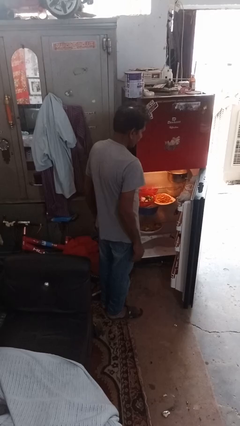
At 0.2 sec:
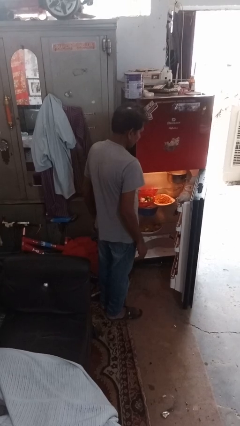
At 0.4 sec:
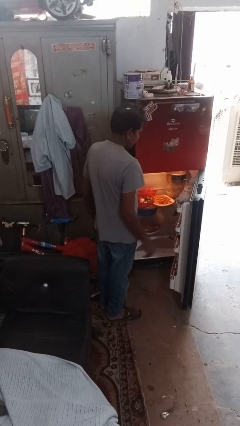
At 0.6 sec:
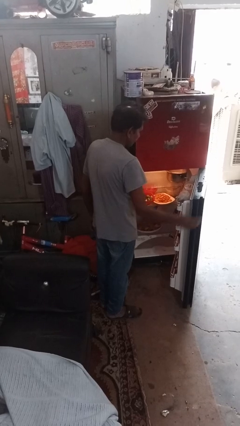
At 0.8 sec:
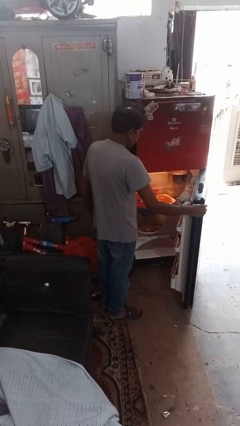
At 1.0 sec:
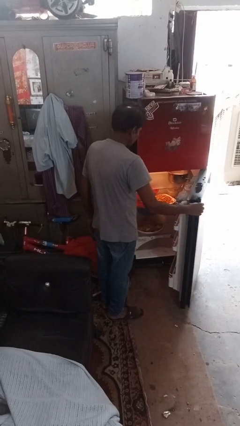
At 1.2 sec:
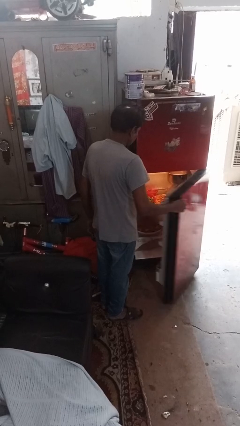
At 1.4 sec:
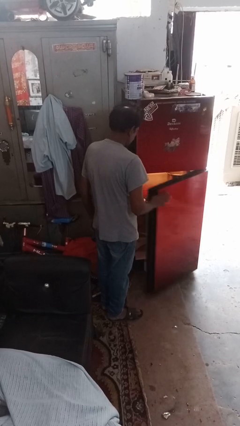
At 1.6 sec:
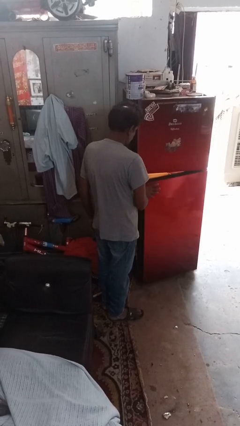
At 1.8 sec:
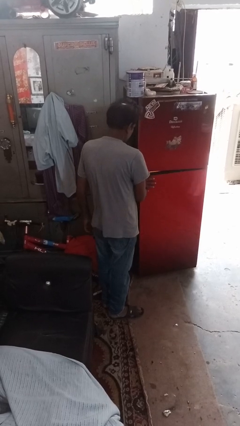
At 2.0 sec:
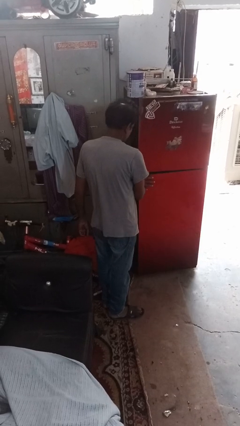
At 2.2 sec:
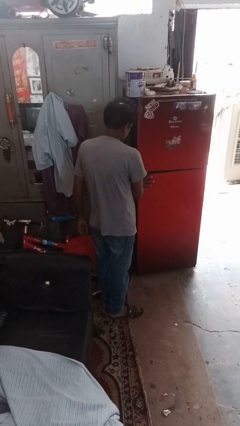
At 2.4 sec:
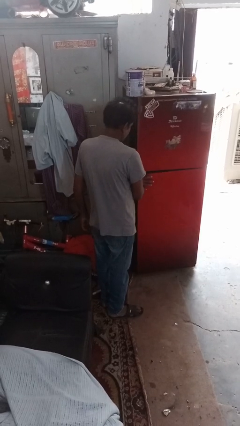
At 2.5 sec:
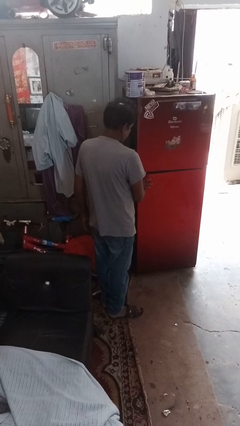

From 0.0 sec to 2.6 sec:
person closes refrigerator

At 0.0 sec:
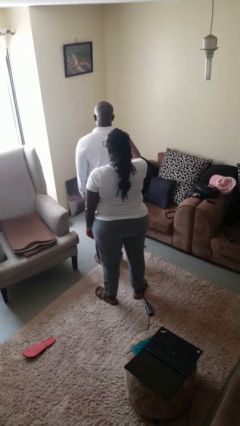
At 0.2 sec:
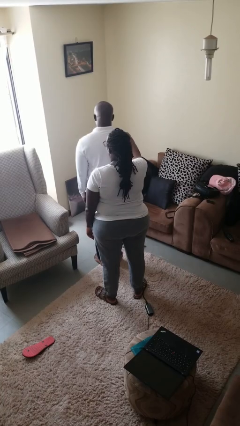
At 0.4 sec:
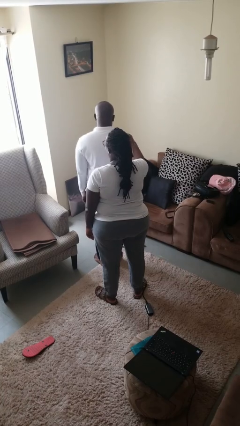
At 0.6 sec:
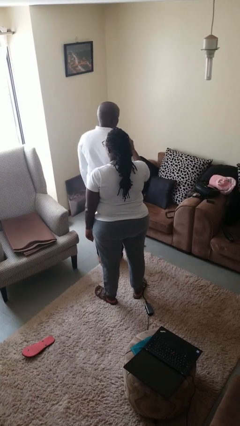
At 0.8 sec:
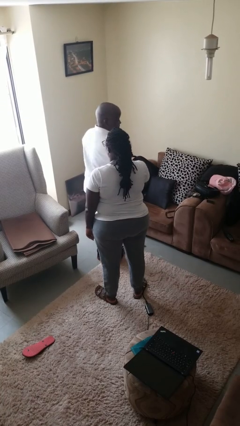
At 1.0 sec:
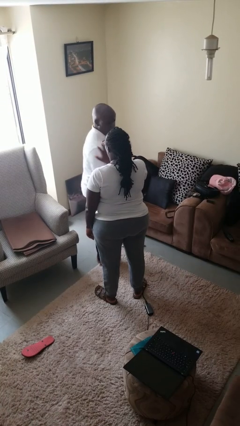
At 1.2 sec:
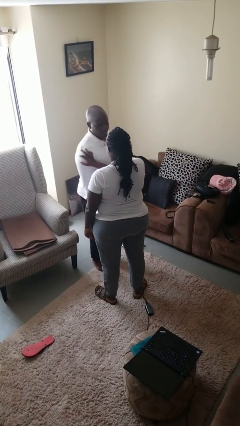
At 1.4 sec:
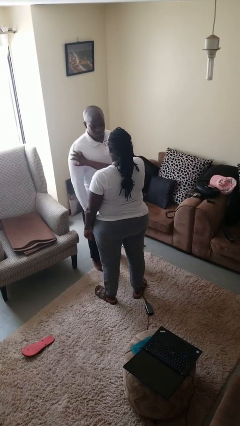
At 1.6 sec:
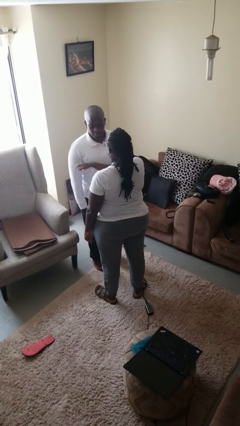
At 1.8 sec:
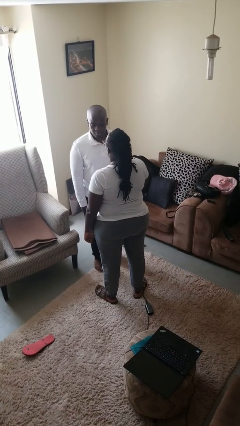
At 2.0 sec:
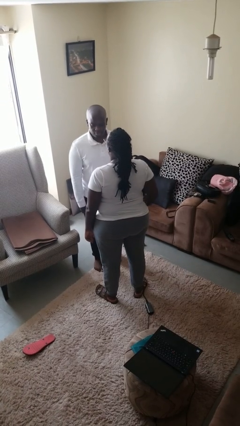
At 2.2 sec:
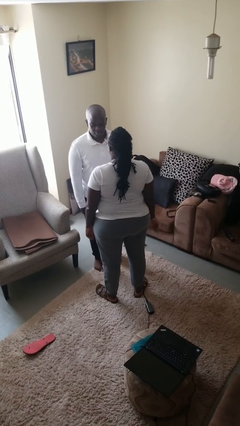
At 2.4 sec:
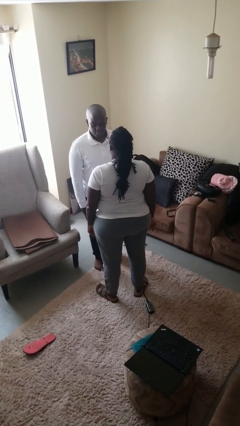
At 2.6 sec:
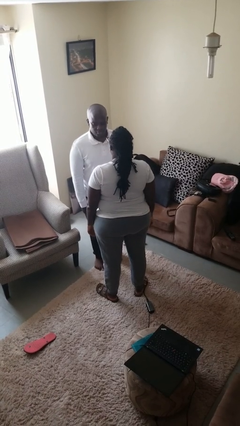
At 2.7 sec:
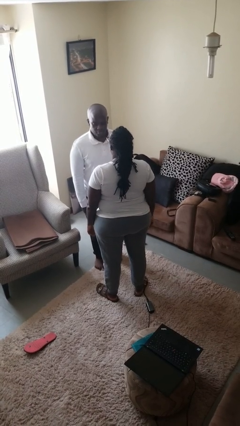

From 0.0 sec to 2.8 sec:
person spins person around

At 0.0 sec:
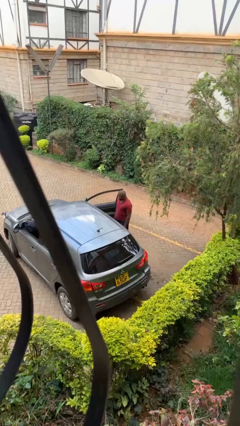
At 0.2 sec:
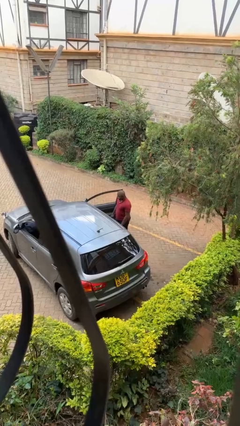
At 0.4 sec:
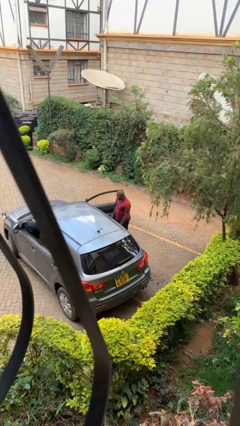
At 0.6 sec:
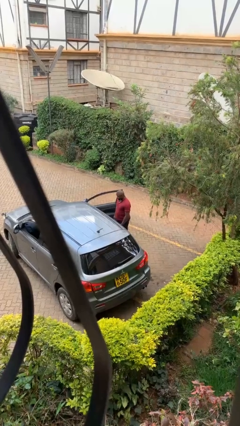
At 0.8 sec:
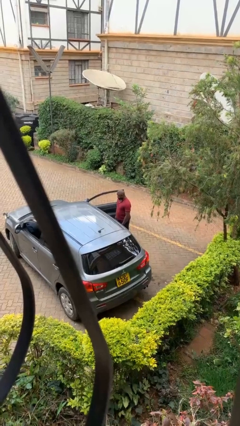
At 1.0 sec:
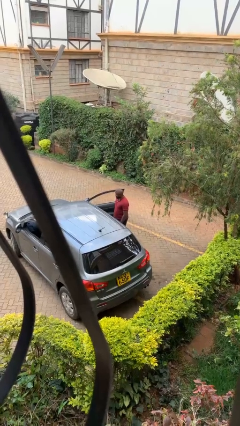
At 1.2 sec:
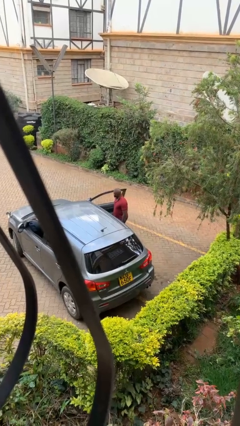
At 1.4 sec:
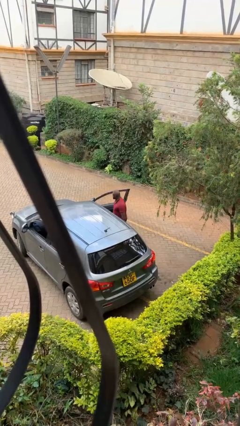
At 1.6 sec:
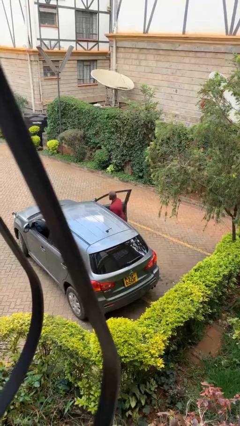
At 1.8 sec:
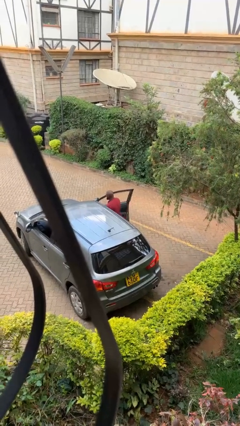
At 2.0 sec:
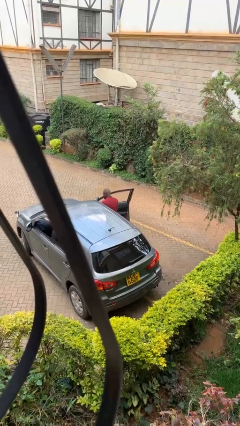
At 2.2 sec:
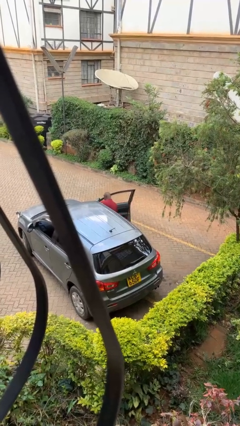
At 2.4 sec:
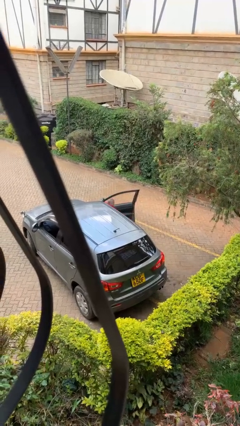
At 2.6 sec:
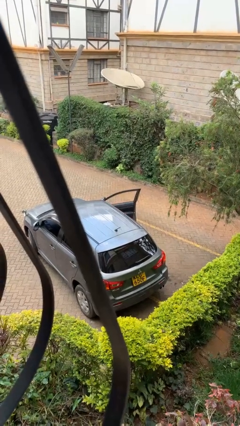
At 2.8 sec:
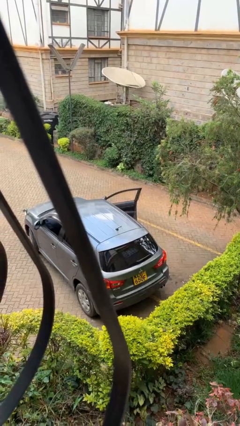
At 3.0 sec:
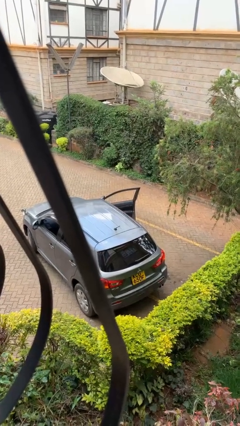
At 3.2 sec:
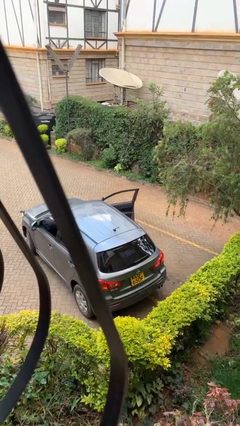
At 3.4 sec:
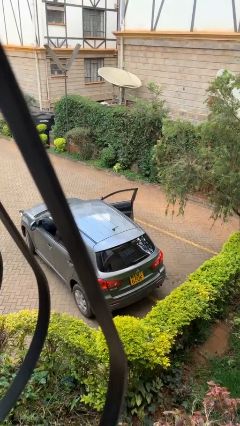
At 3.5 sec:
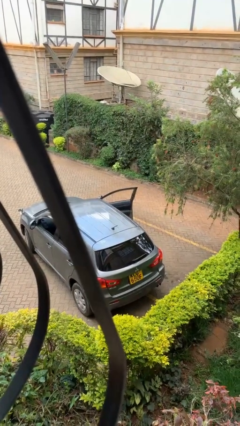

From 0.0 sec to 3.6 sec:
person enters car

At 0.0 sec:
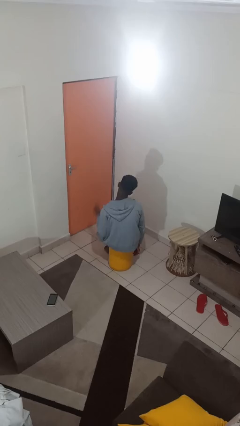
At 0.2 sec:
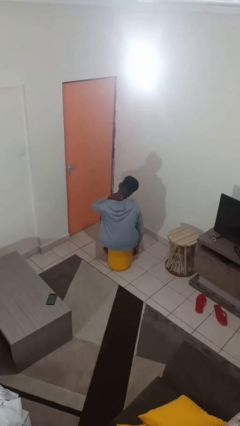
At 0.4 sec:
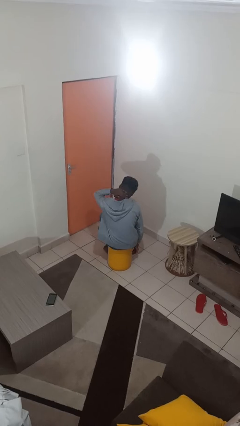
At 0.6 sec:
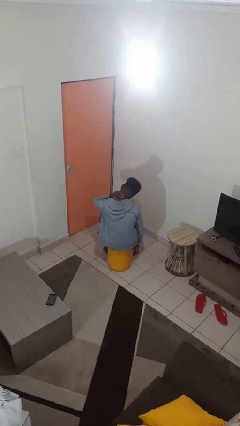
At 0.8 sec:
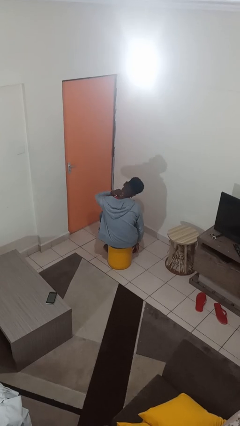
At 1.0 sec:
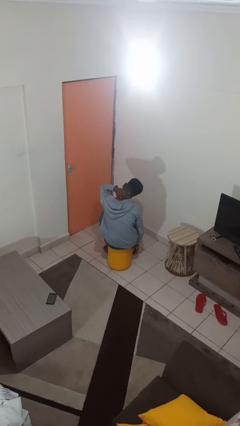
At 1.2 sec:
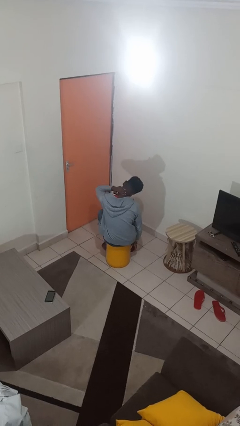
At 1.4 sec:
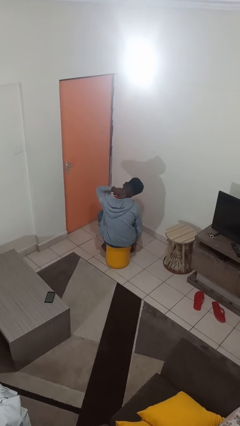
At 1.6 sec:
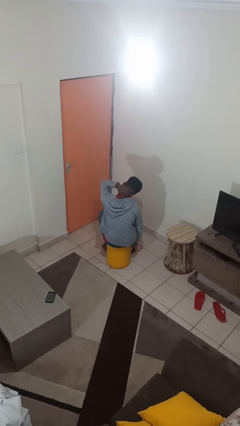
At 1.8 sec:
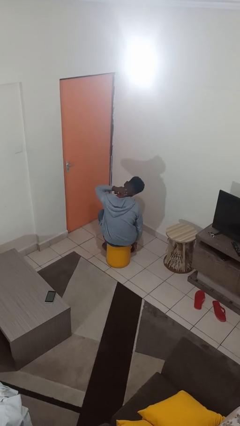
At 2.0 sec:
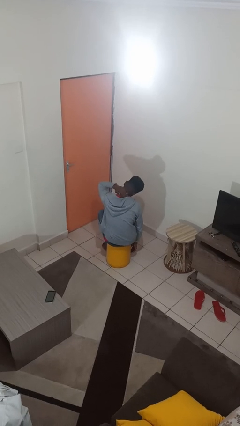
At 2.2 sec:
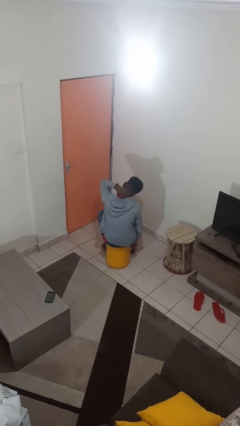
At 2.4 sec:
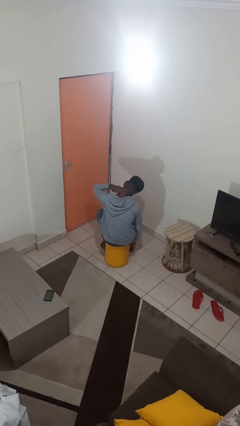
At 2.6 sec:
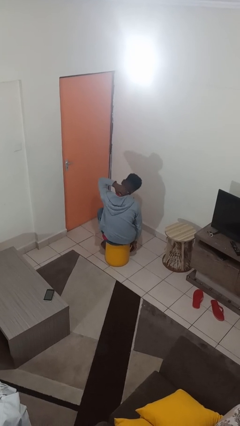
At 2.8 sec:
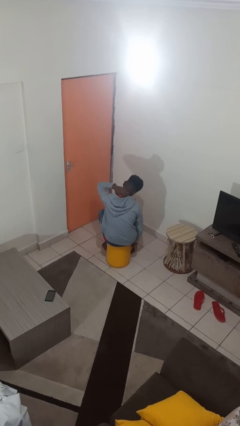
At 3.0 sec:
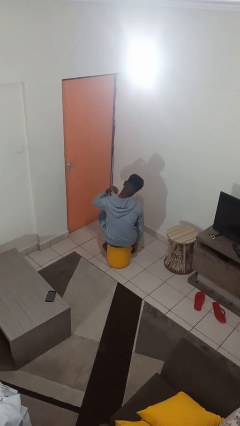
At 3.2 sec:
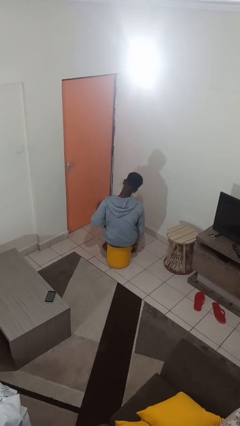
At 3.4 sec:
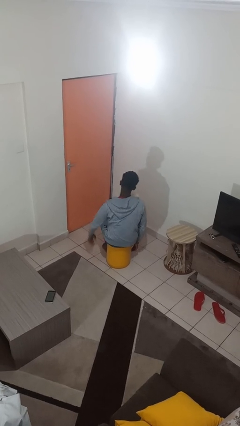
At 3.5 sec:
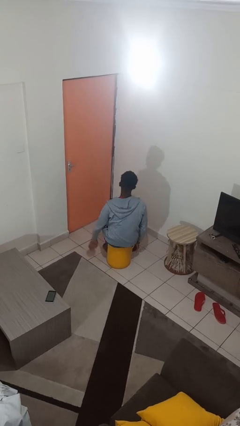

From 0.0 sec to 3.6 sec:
person rubs neck

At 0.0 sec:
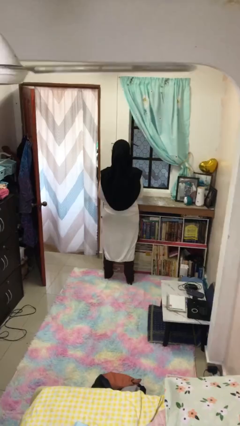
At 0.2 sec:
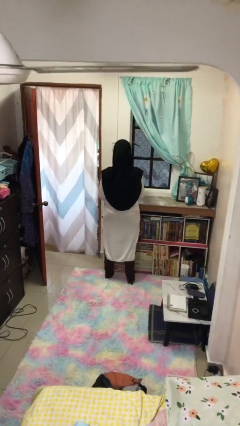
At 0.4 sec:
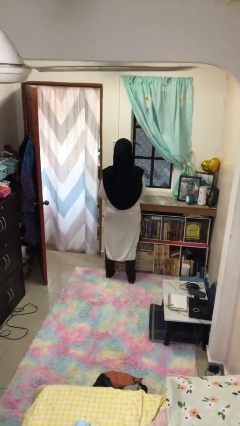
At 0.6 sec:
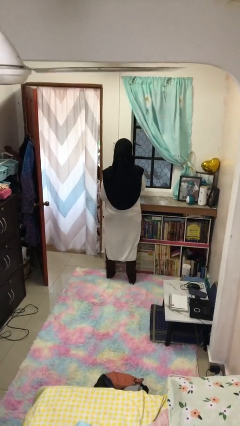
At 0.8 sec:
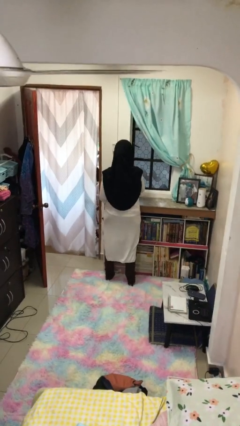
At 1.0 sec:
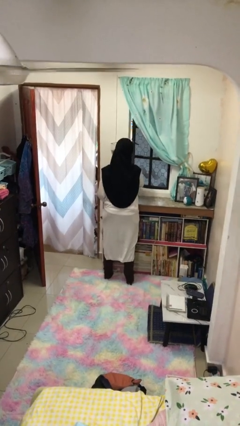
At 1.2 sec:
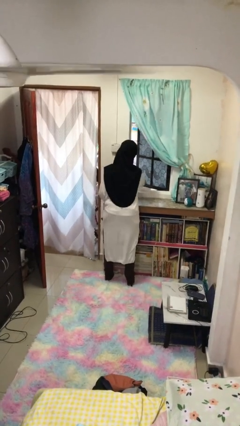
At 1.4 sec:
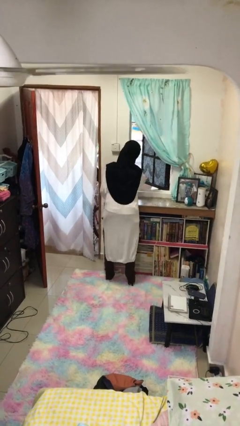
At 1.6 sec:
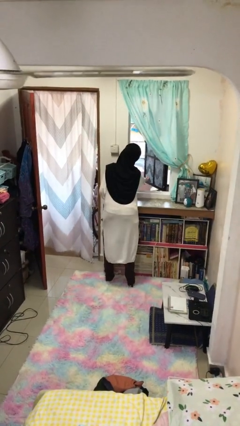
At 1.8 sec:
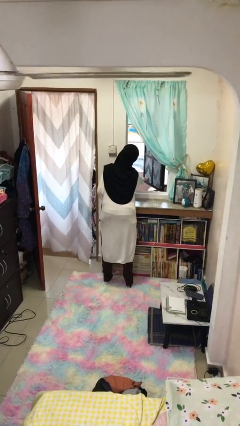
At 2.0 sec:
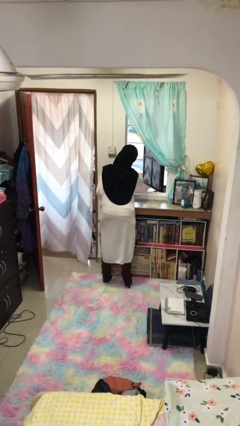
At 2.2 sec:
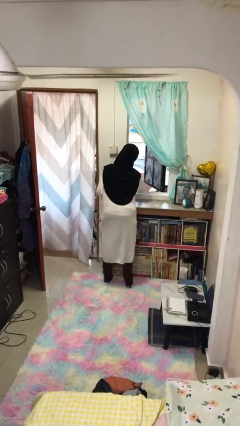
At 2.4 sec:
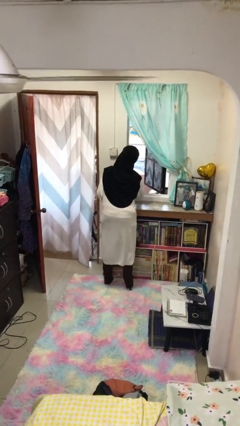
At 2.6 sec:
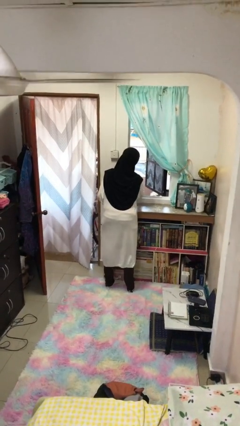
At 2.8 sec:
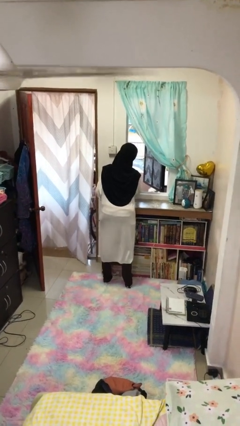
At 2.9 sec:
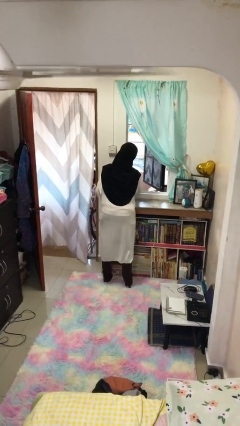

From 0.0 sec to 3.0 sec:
person opens home window

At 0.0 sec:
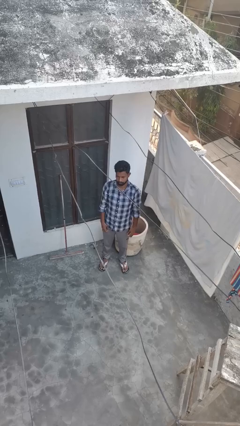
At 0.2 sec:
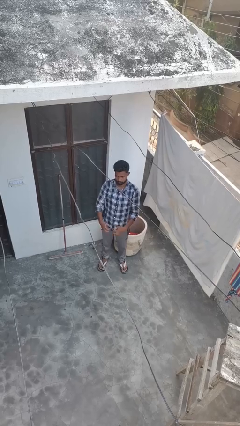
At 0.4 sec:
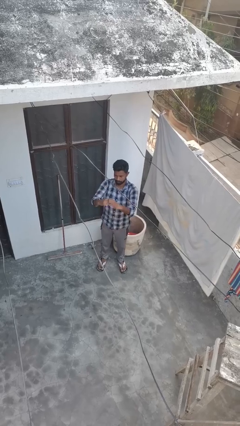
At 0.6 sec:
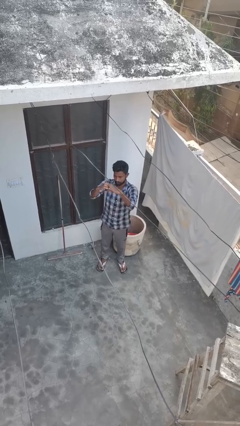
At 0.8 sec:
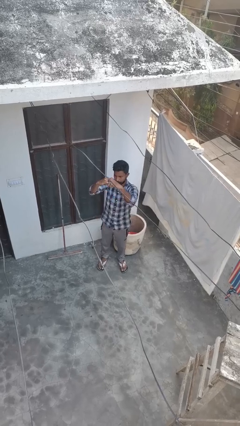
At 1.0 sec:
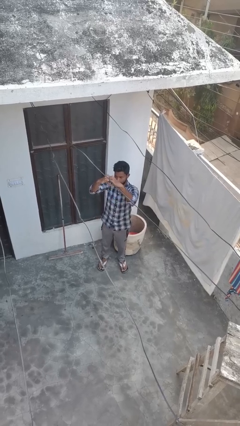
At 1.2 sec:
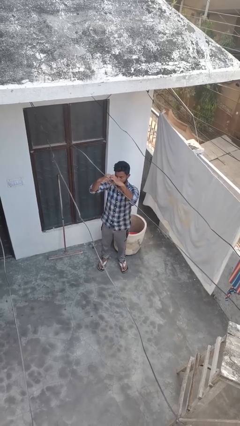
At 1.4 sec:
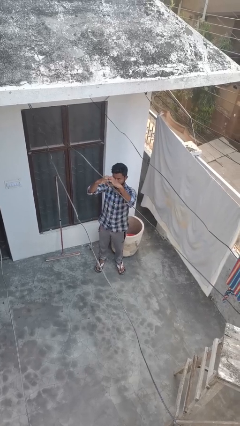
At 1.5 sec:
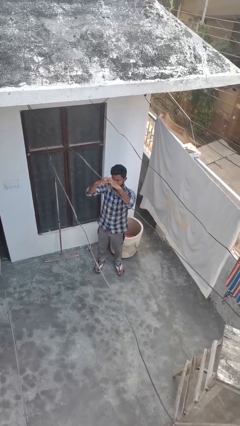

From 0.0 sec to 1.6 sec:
person gestures heart
